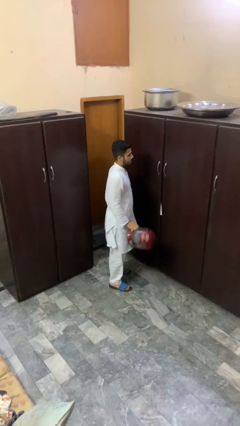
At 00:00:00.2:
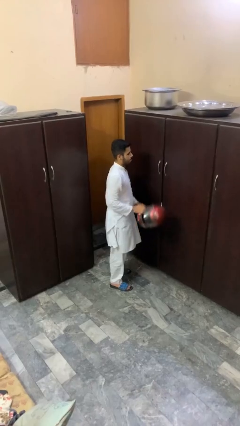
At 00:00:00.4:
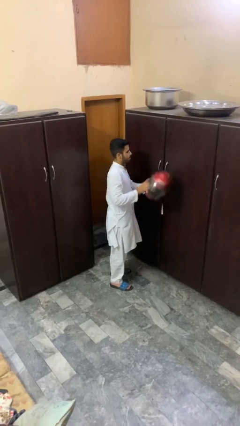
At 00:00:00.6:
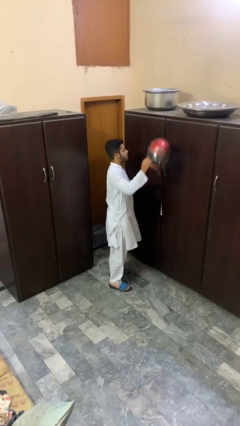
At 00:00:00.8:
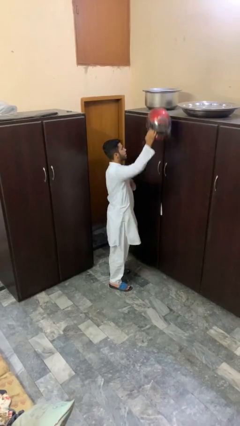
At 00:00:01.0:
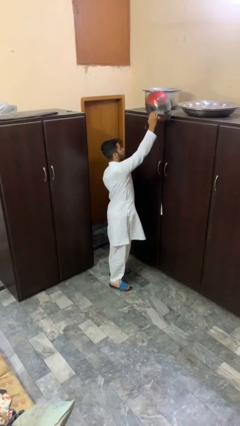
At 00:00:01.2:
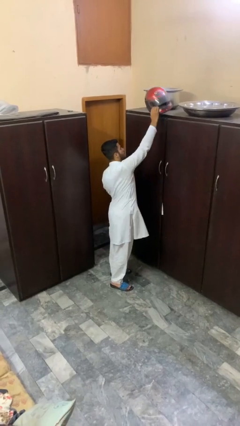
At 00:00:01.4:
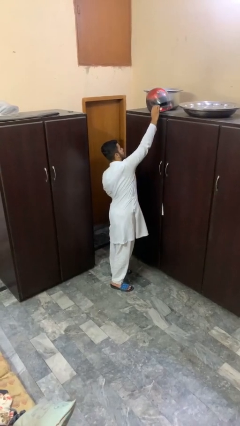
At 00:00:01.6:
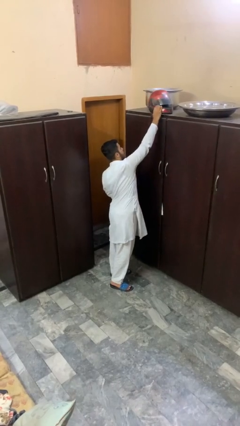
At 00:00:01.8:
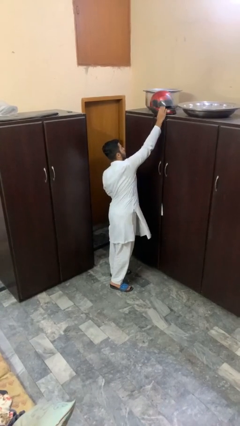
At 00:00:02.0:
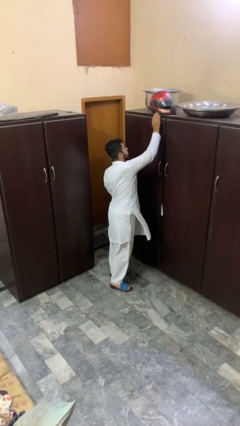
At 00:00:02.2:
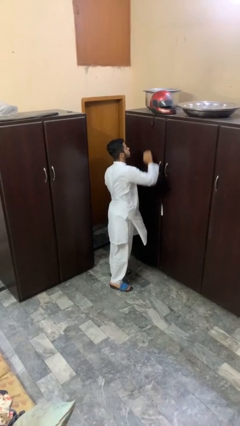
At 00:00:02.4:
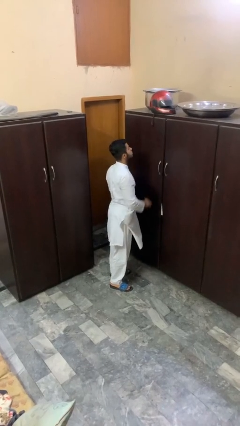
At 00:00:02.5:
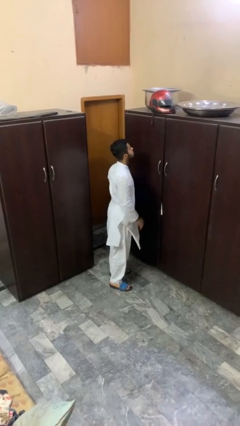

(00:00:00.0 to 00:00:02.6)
person puts down object on shelf

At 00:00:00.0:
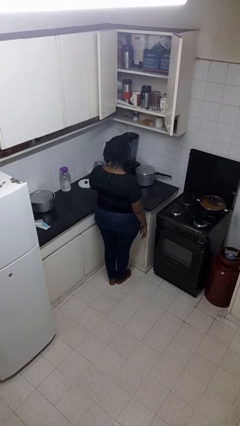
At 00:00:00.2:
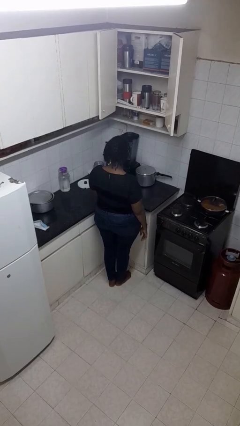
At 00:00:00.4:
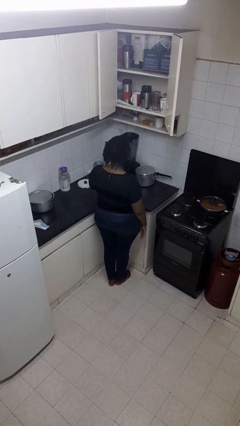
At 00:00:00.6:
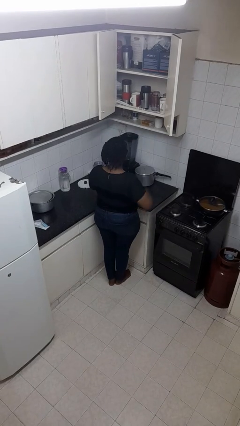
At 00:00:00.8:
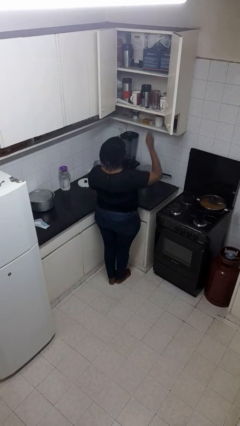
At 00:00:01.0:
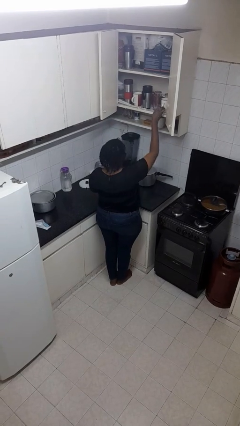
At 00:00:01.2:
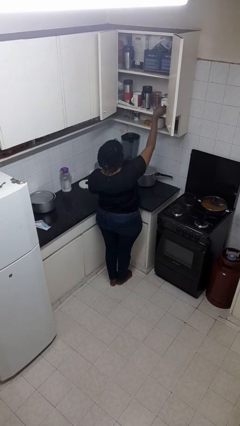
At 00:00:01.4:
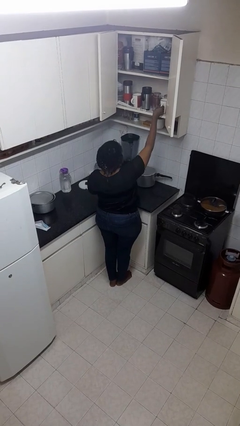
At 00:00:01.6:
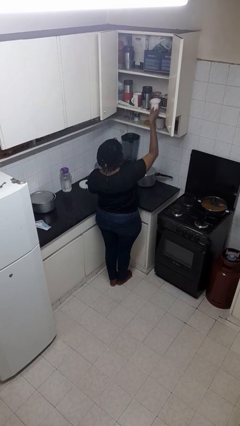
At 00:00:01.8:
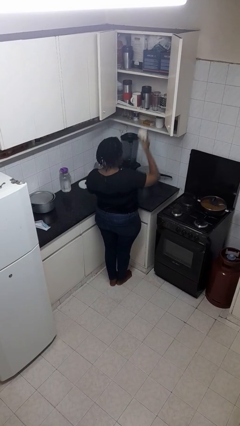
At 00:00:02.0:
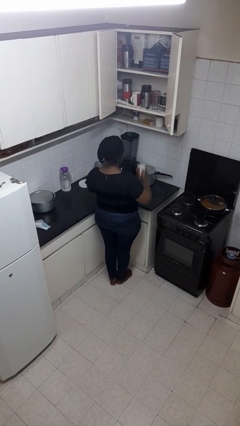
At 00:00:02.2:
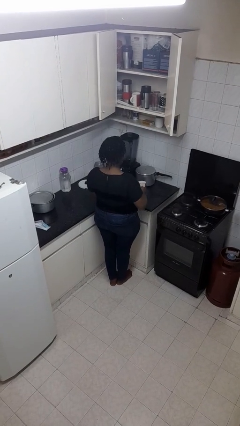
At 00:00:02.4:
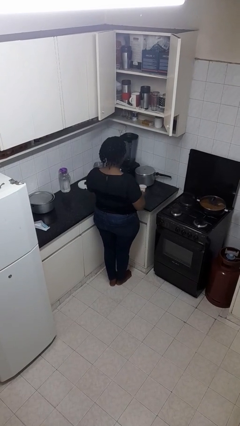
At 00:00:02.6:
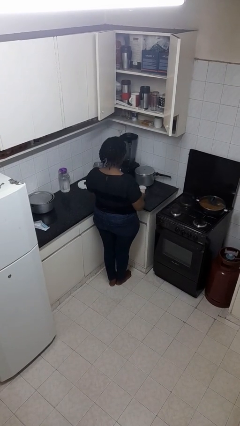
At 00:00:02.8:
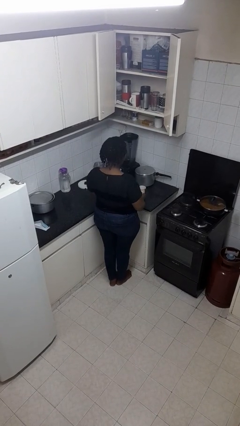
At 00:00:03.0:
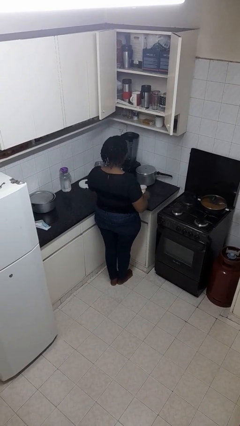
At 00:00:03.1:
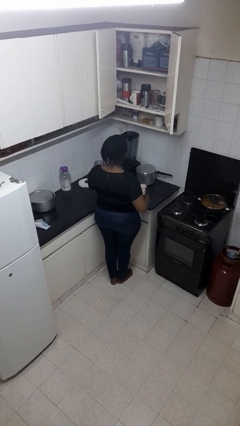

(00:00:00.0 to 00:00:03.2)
person takes object from cabinet

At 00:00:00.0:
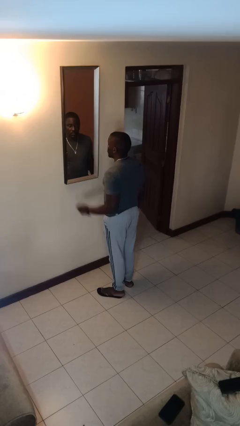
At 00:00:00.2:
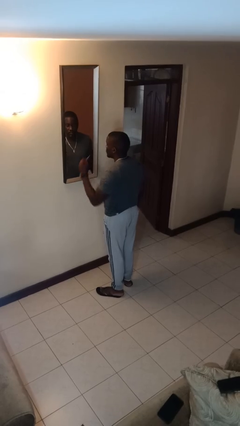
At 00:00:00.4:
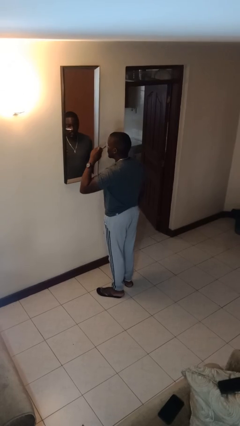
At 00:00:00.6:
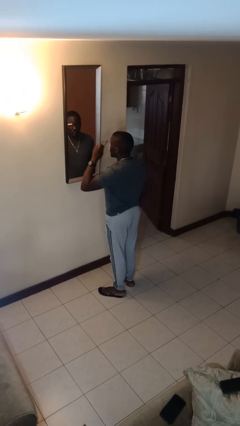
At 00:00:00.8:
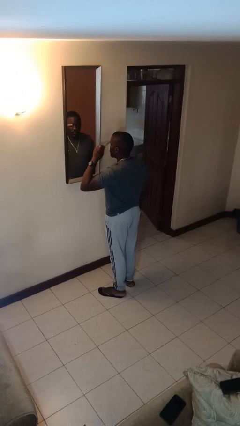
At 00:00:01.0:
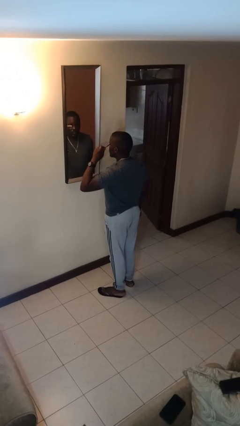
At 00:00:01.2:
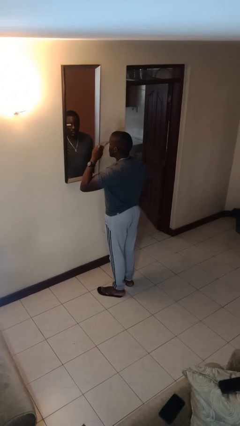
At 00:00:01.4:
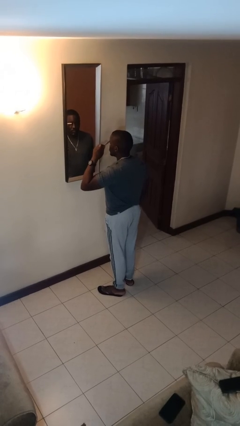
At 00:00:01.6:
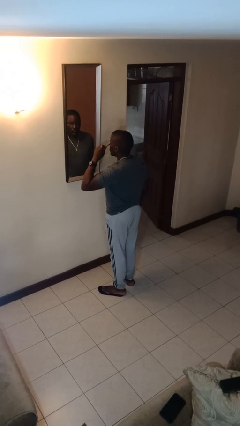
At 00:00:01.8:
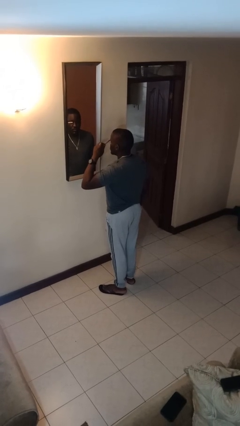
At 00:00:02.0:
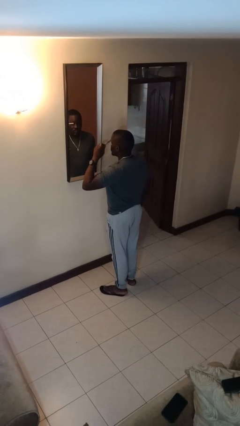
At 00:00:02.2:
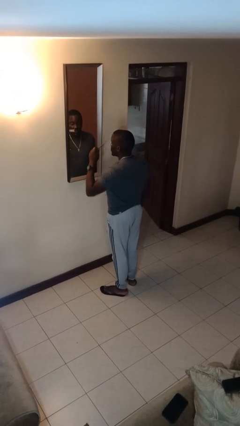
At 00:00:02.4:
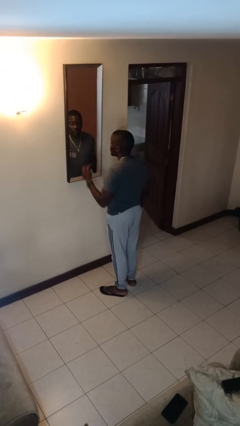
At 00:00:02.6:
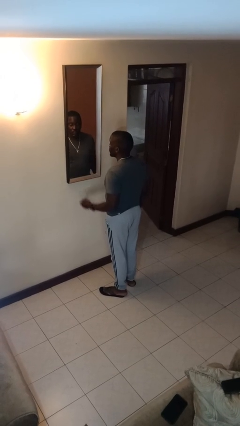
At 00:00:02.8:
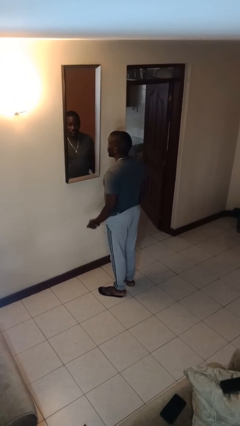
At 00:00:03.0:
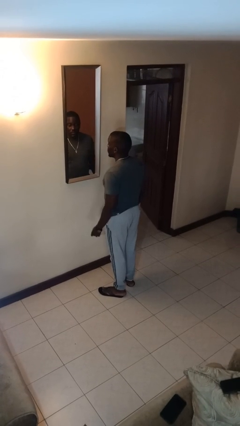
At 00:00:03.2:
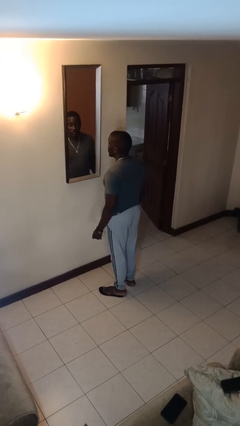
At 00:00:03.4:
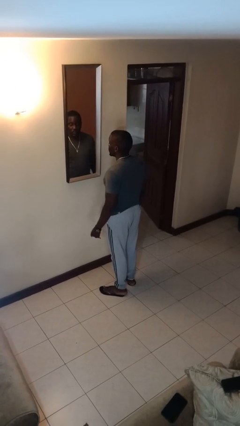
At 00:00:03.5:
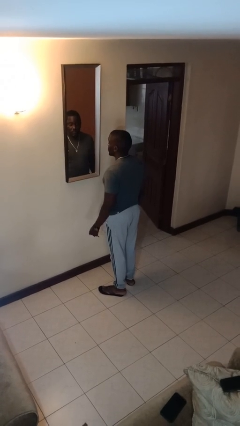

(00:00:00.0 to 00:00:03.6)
person applies eye makeup

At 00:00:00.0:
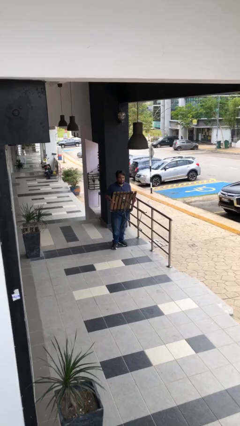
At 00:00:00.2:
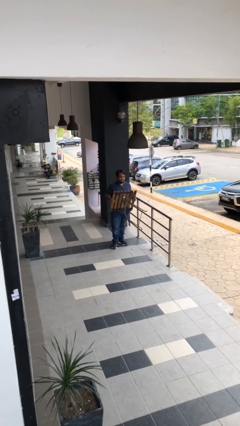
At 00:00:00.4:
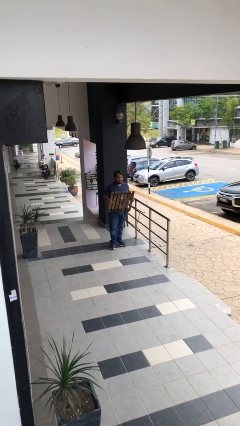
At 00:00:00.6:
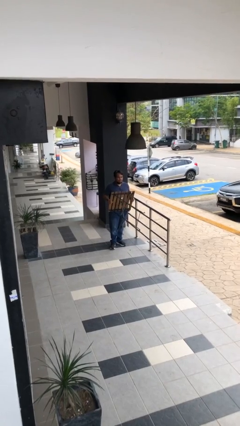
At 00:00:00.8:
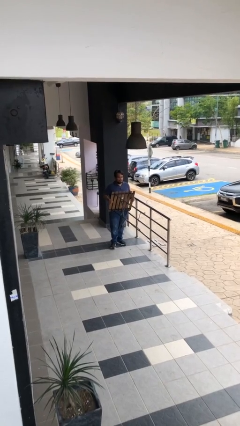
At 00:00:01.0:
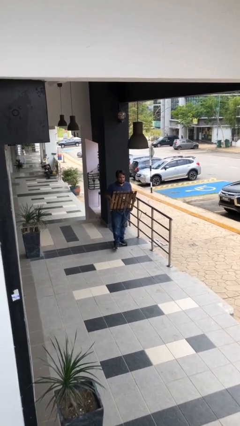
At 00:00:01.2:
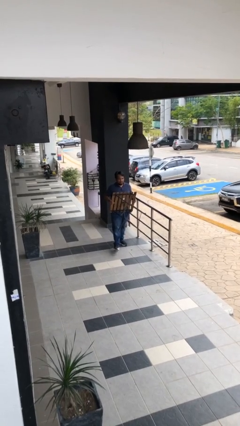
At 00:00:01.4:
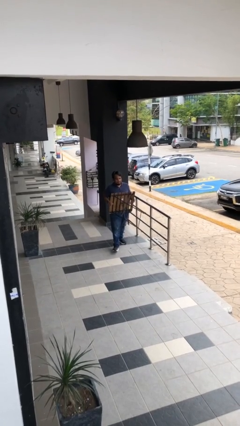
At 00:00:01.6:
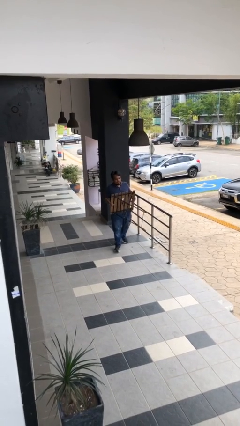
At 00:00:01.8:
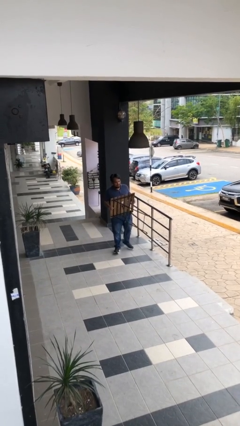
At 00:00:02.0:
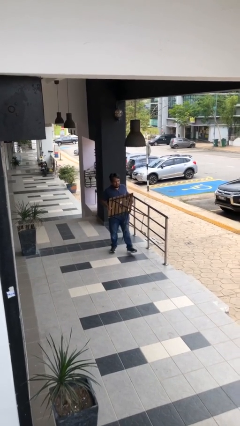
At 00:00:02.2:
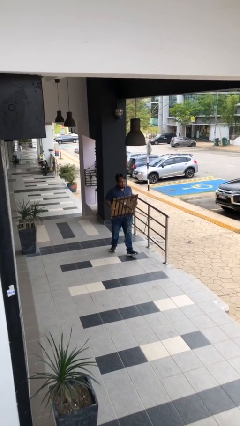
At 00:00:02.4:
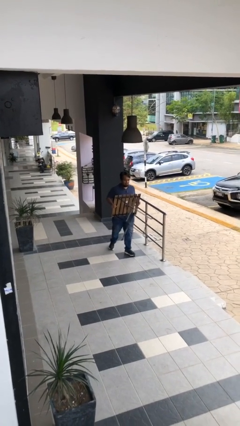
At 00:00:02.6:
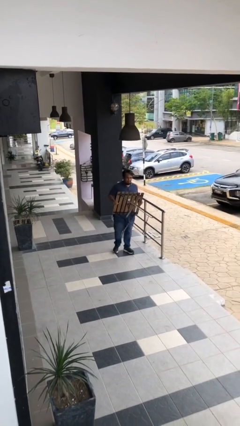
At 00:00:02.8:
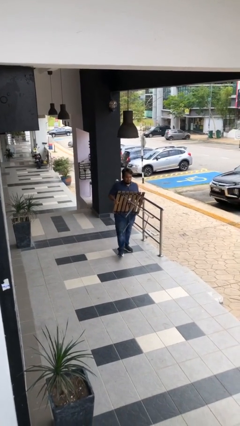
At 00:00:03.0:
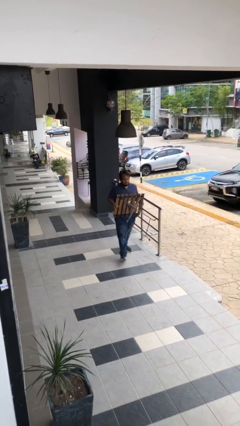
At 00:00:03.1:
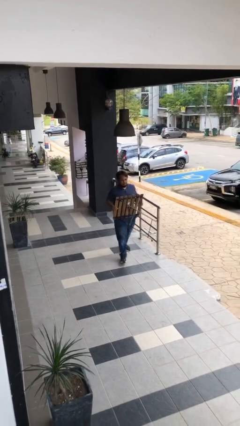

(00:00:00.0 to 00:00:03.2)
person carries heavy object

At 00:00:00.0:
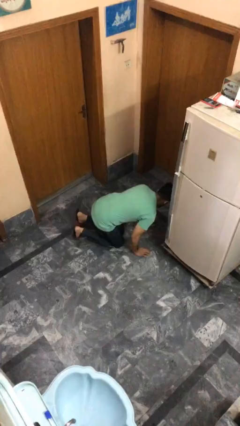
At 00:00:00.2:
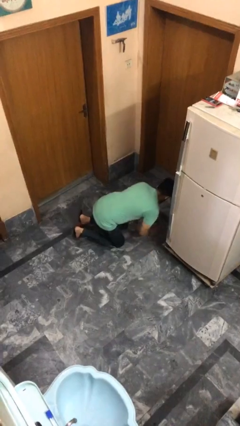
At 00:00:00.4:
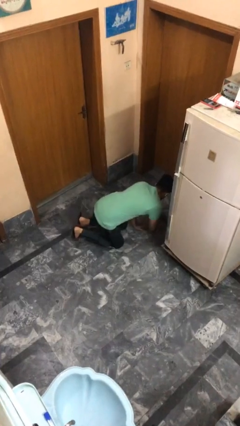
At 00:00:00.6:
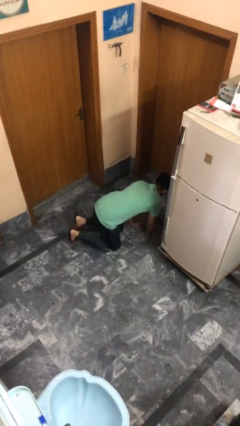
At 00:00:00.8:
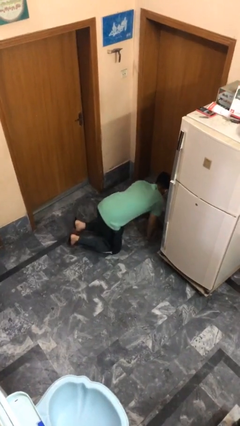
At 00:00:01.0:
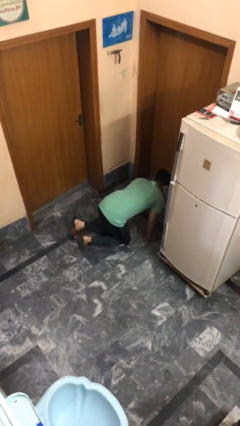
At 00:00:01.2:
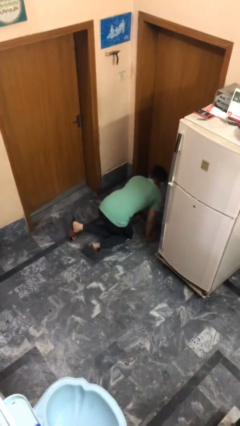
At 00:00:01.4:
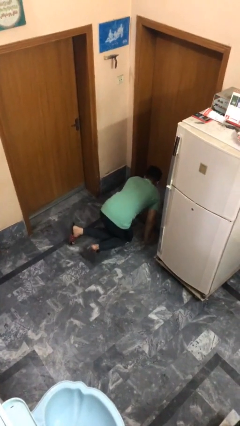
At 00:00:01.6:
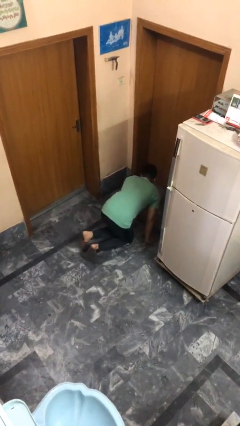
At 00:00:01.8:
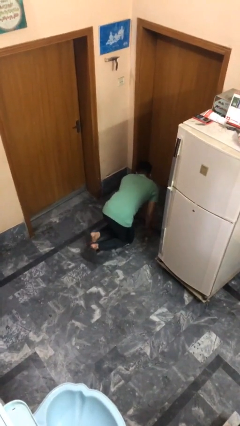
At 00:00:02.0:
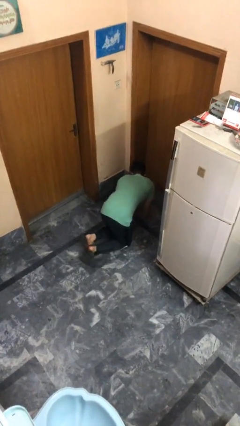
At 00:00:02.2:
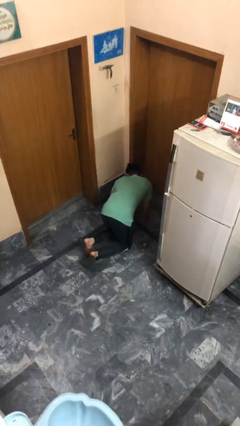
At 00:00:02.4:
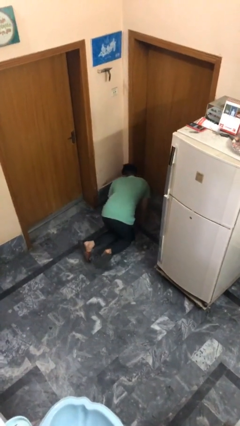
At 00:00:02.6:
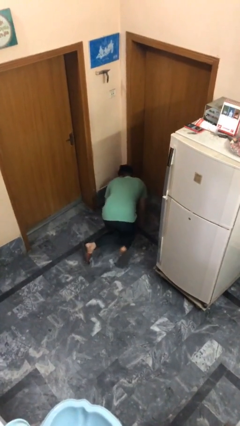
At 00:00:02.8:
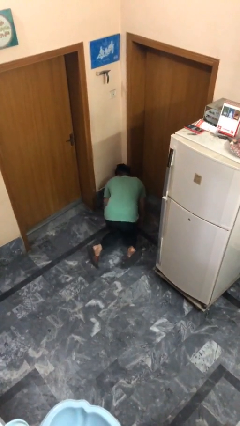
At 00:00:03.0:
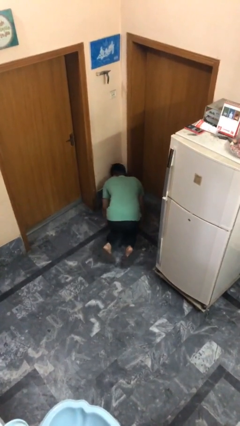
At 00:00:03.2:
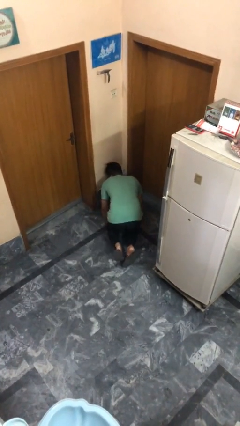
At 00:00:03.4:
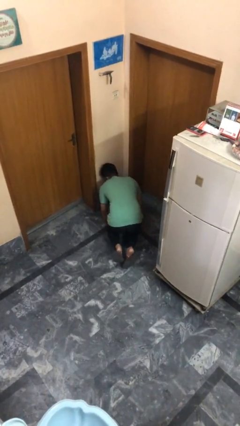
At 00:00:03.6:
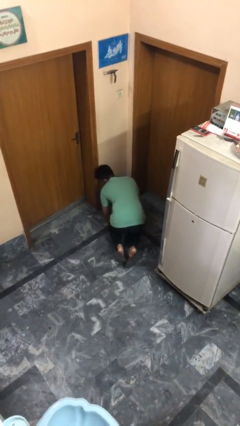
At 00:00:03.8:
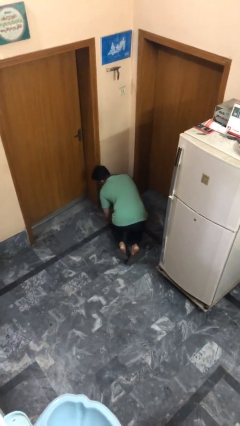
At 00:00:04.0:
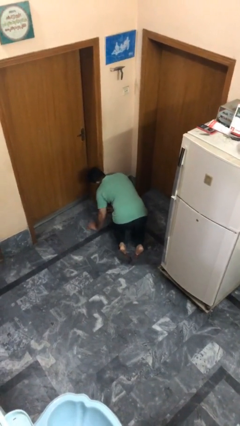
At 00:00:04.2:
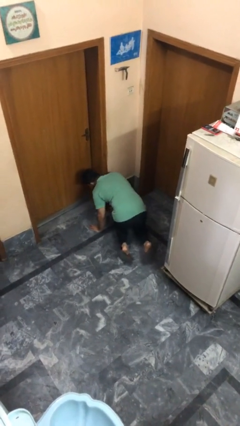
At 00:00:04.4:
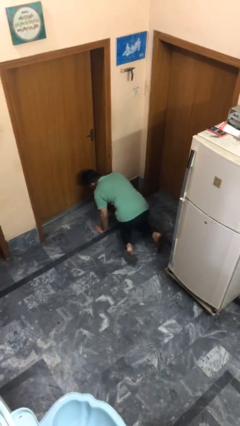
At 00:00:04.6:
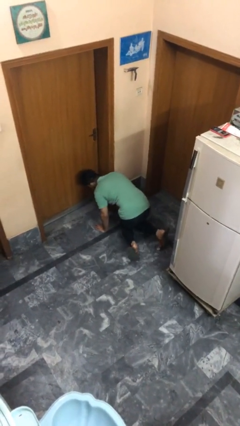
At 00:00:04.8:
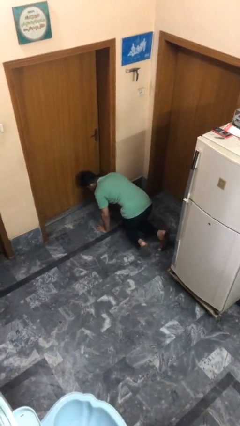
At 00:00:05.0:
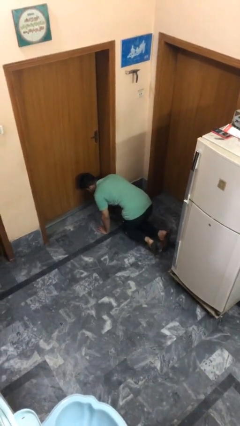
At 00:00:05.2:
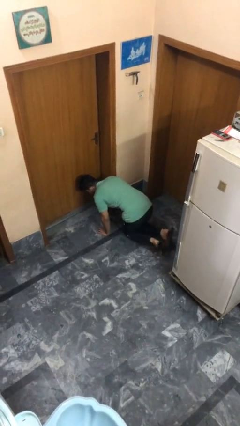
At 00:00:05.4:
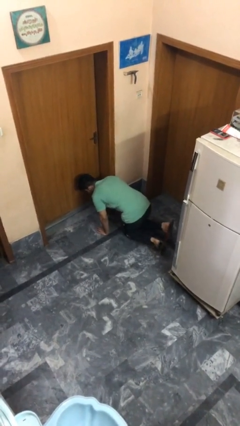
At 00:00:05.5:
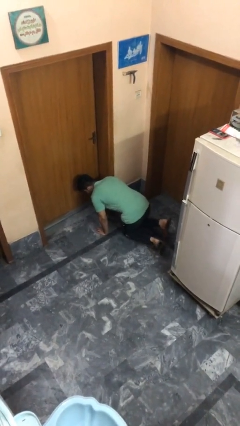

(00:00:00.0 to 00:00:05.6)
person crawls
